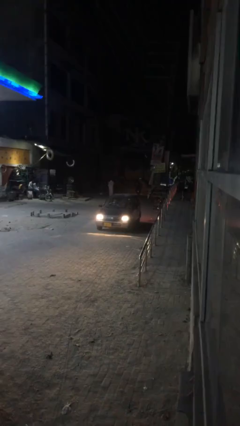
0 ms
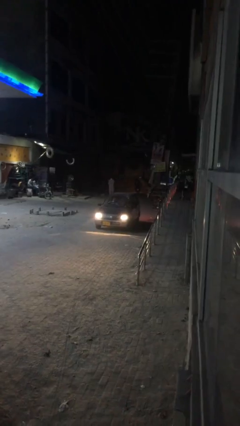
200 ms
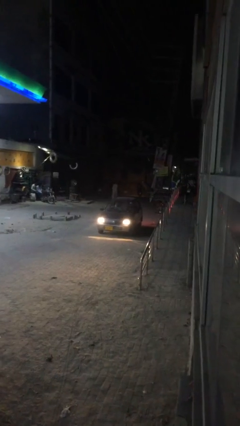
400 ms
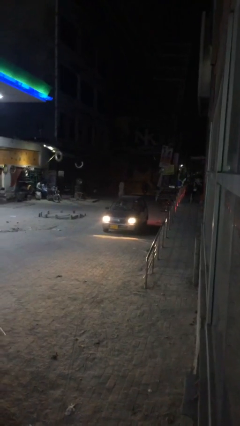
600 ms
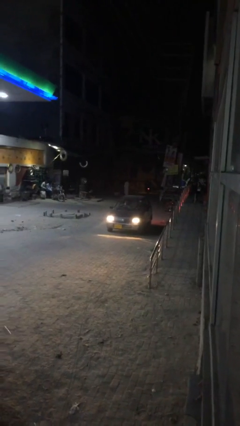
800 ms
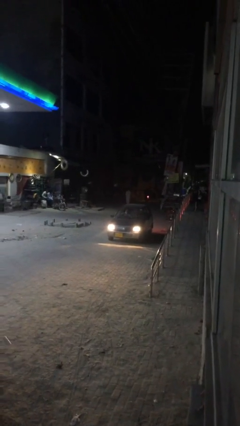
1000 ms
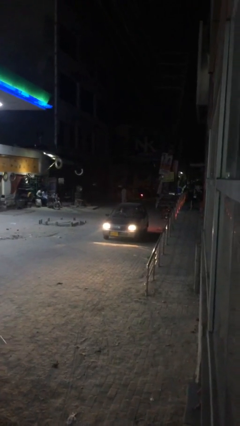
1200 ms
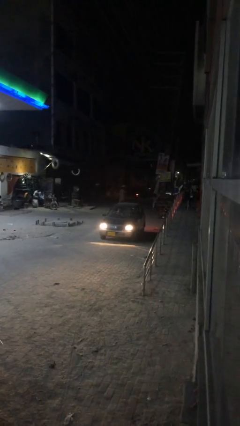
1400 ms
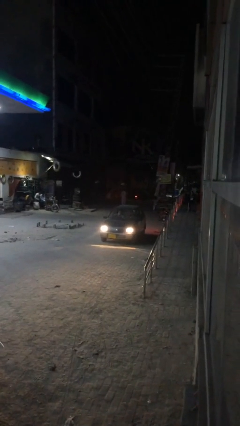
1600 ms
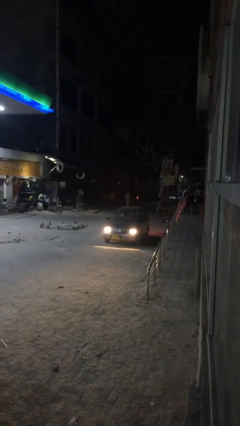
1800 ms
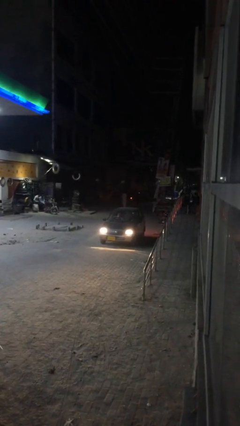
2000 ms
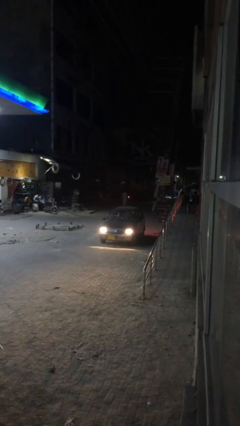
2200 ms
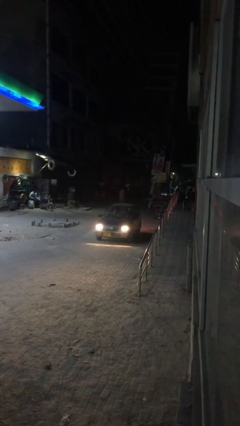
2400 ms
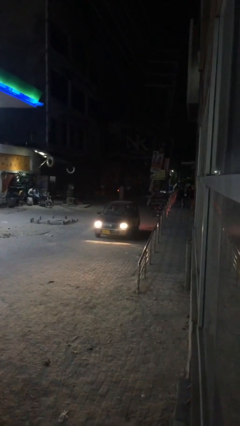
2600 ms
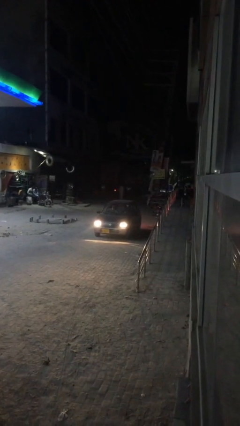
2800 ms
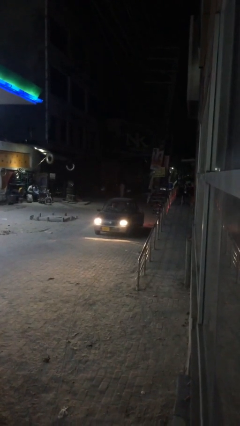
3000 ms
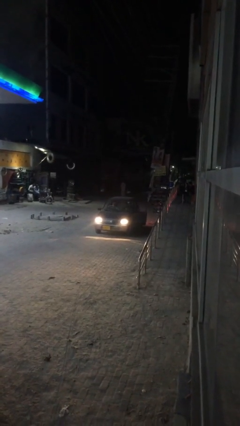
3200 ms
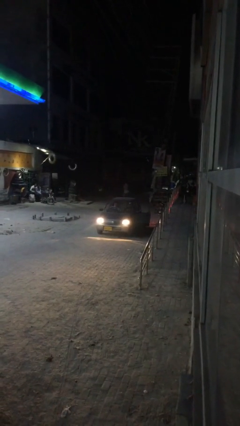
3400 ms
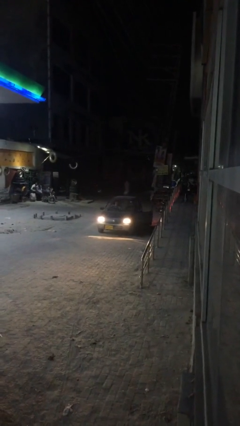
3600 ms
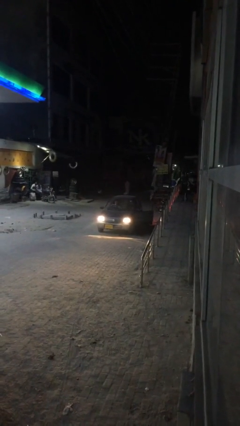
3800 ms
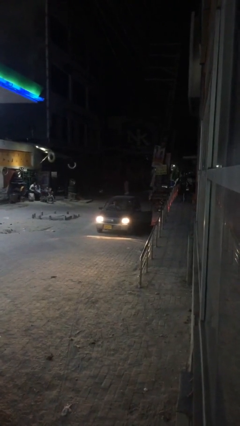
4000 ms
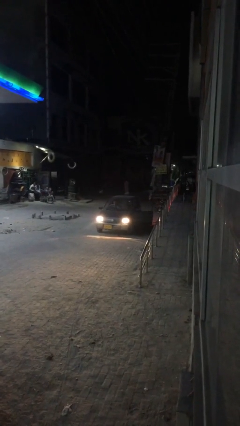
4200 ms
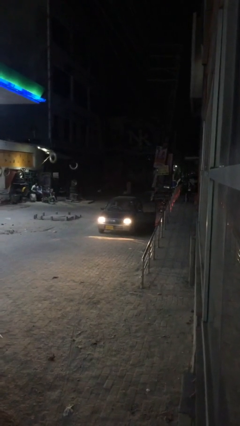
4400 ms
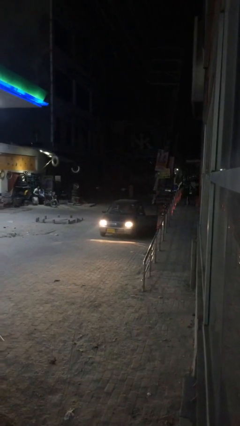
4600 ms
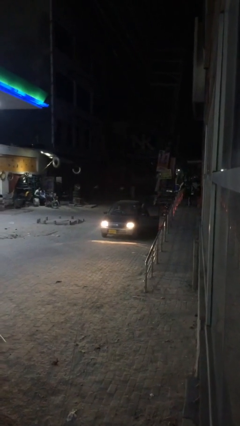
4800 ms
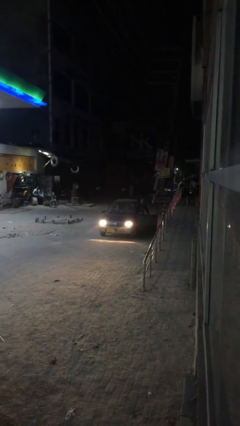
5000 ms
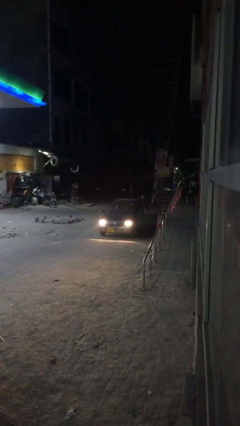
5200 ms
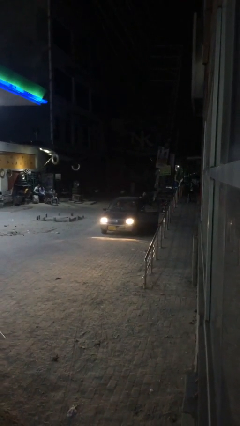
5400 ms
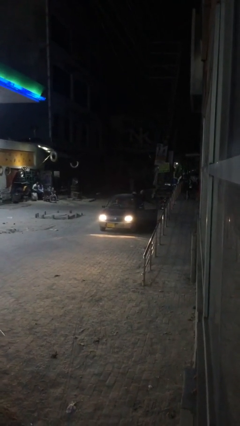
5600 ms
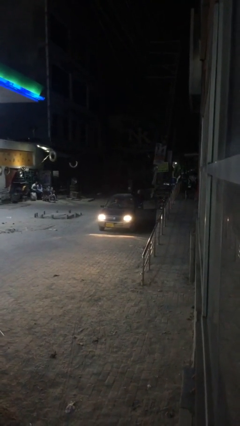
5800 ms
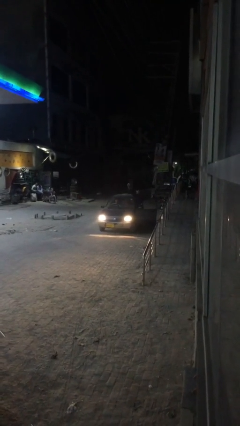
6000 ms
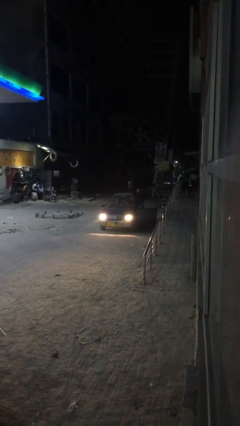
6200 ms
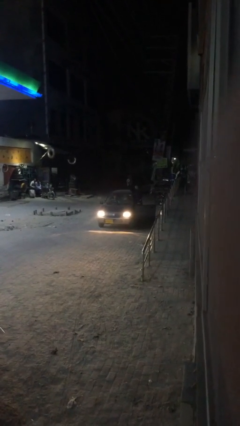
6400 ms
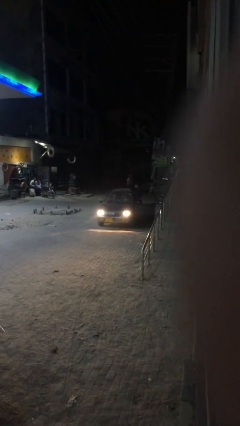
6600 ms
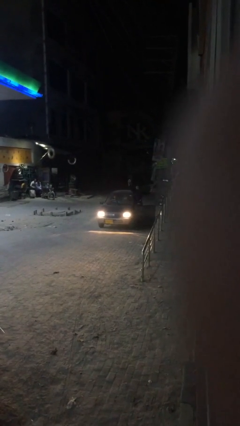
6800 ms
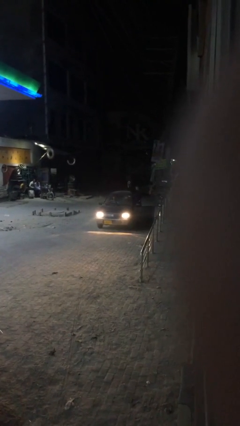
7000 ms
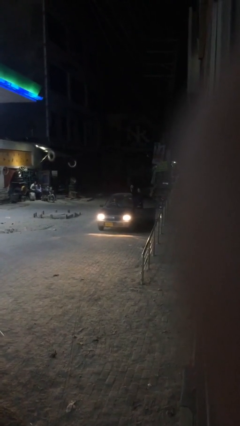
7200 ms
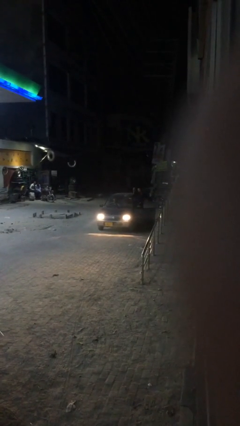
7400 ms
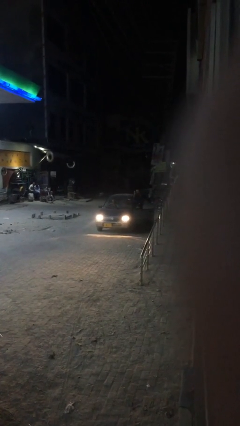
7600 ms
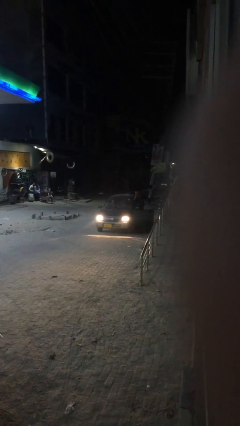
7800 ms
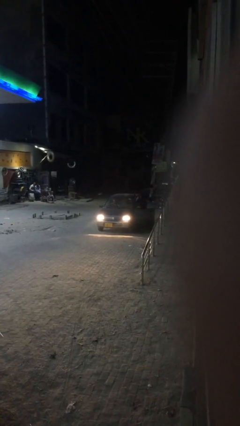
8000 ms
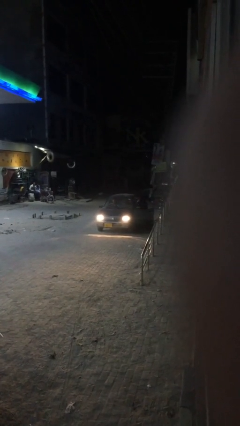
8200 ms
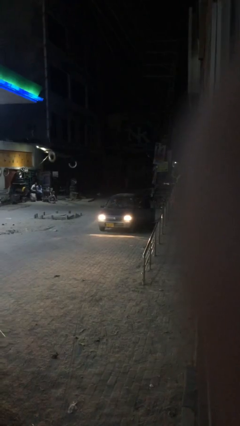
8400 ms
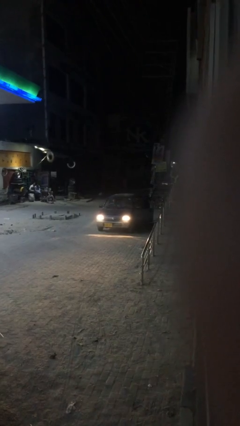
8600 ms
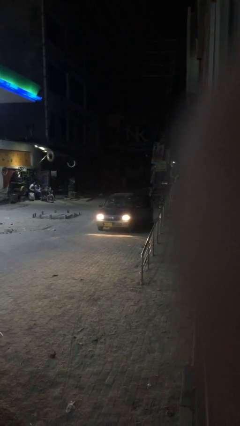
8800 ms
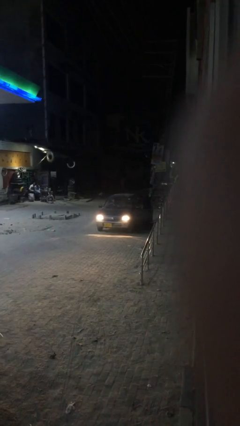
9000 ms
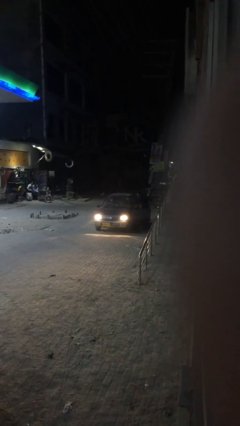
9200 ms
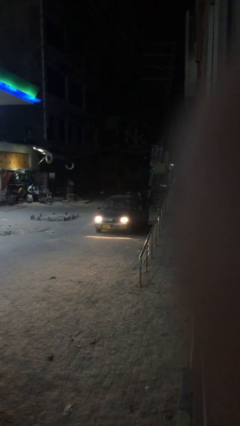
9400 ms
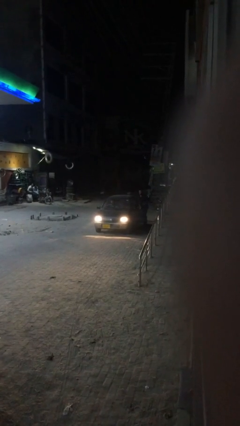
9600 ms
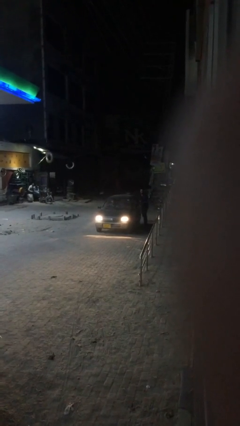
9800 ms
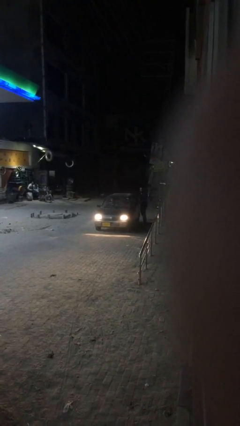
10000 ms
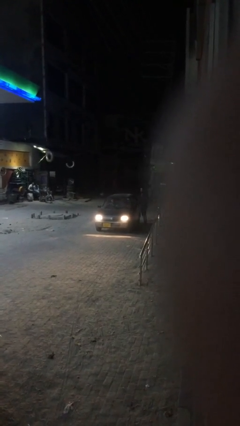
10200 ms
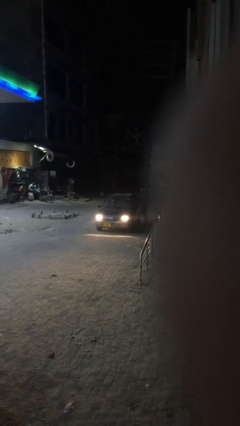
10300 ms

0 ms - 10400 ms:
car drops off person

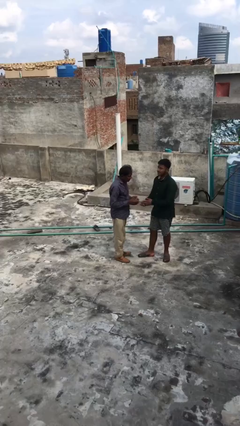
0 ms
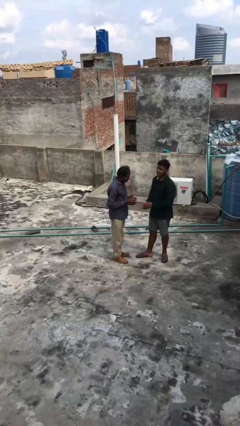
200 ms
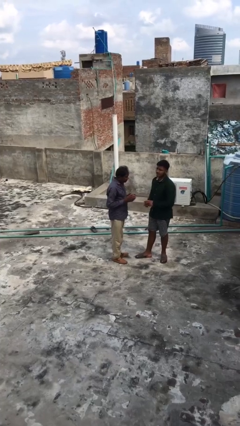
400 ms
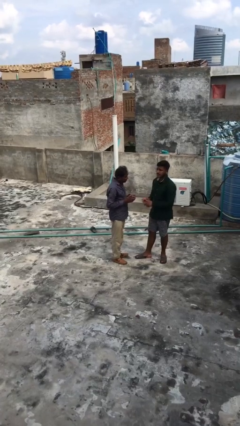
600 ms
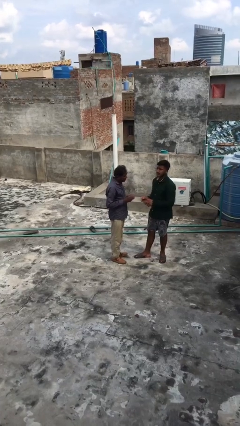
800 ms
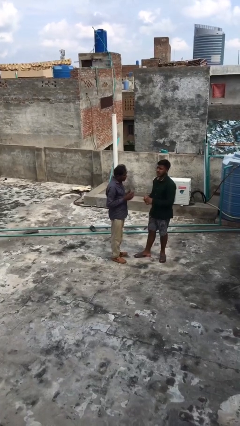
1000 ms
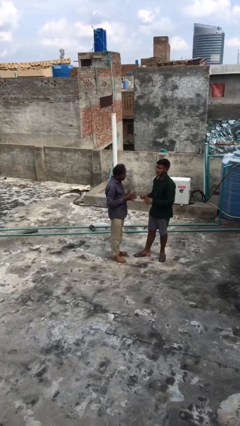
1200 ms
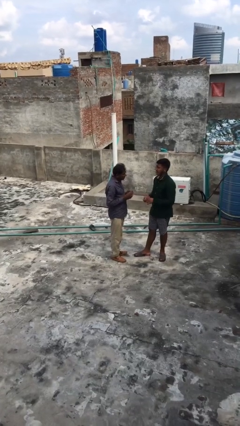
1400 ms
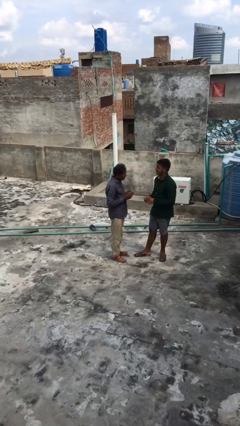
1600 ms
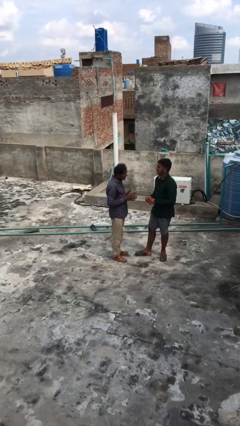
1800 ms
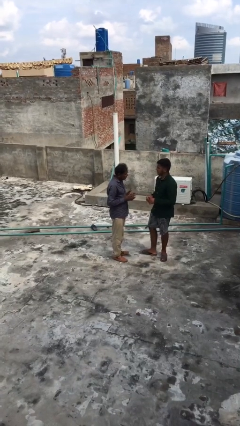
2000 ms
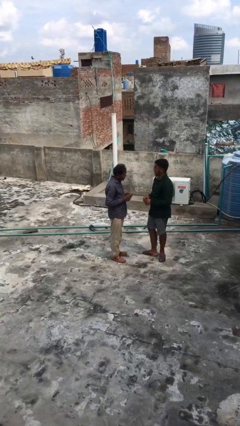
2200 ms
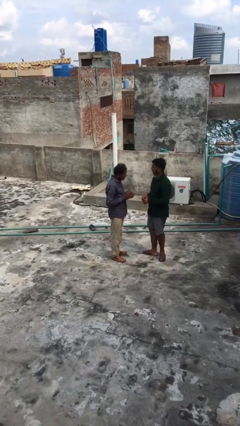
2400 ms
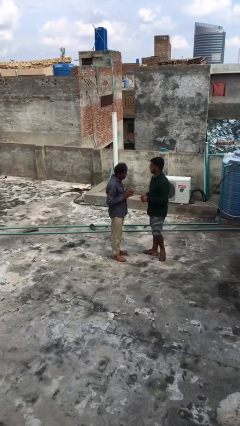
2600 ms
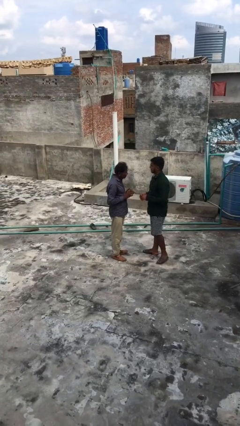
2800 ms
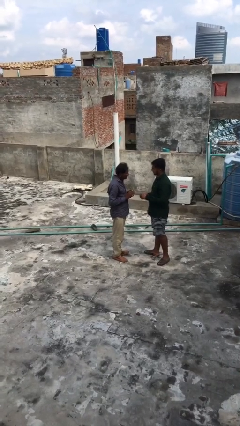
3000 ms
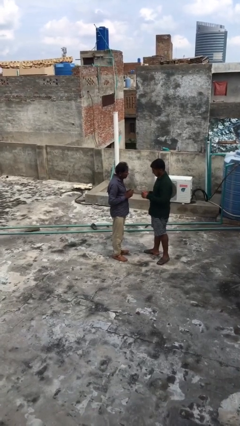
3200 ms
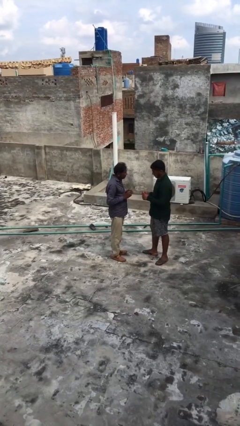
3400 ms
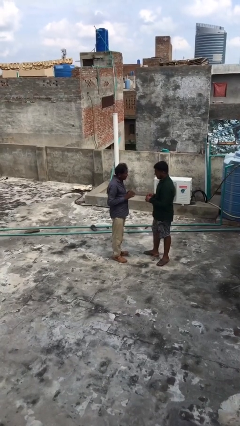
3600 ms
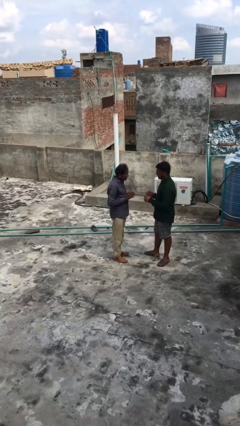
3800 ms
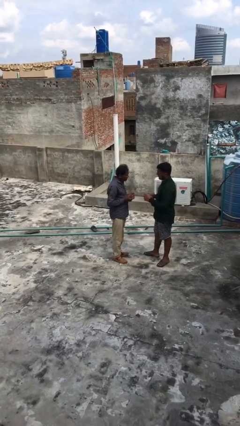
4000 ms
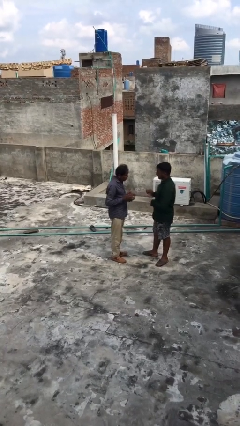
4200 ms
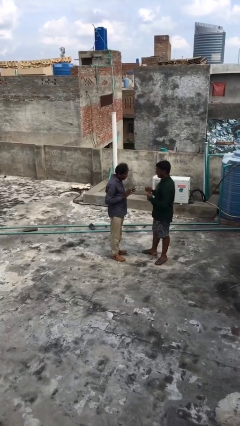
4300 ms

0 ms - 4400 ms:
person talks to person

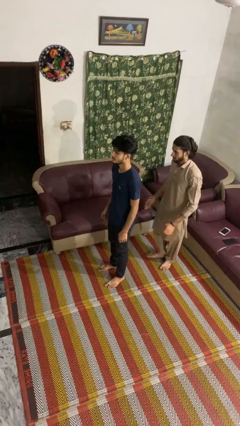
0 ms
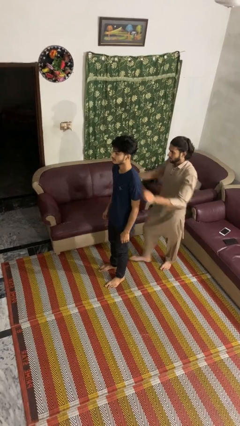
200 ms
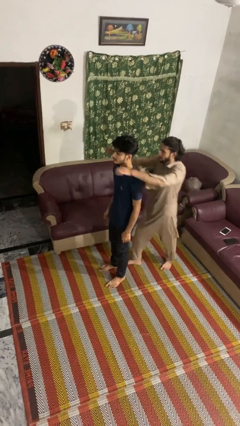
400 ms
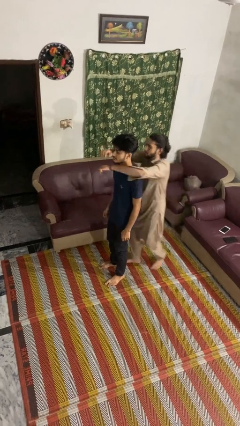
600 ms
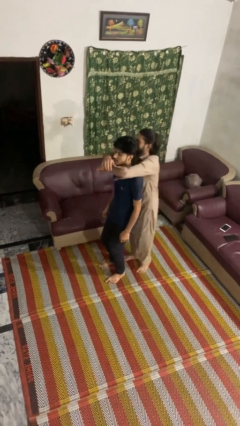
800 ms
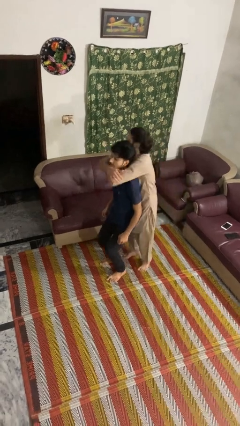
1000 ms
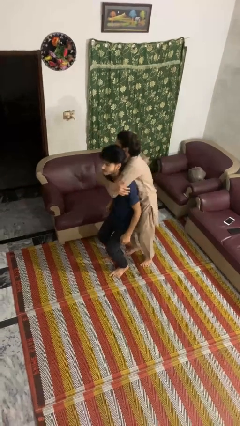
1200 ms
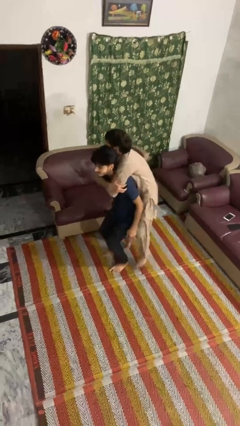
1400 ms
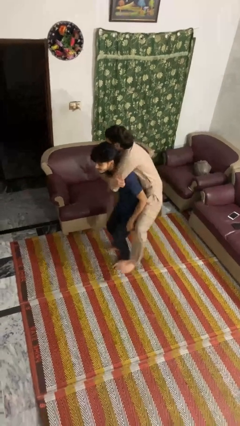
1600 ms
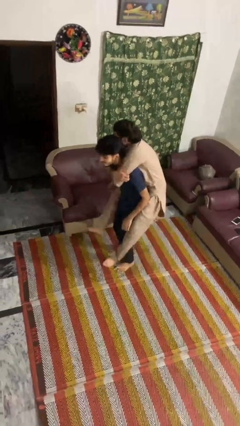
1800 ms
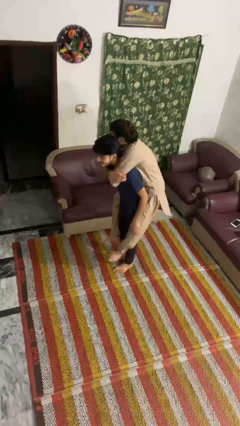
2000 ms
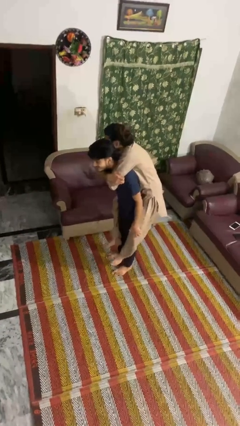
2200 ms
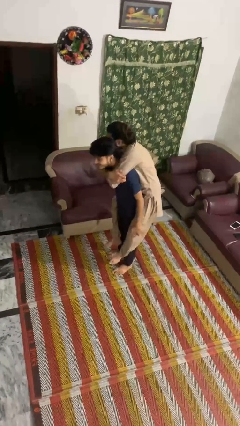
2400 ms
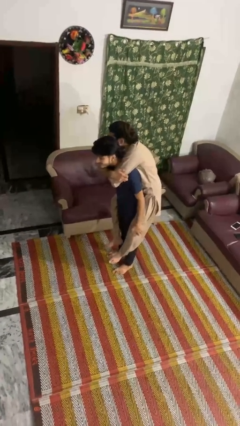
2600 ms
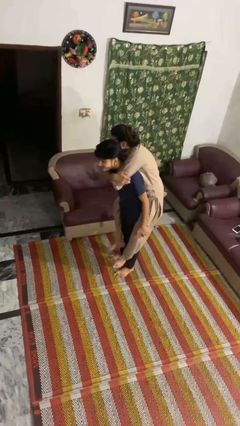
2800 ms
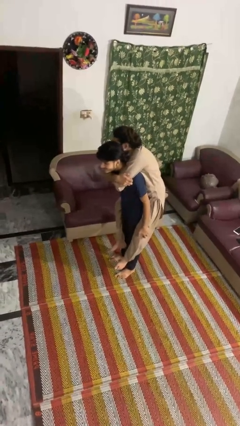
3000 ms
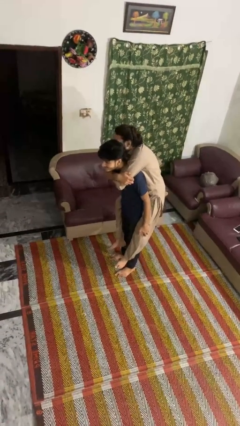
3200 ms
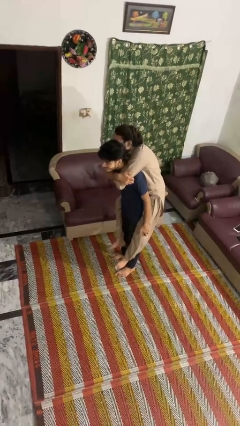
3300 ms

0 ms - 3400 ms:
person carries person over shoulder
